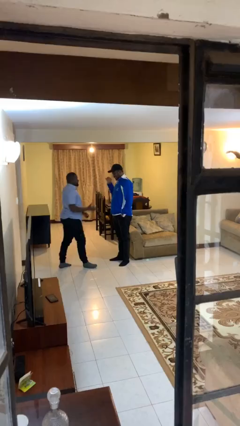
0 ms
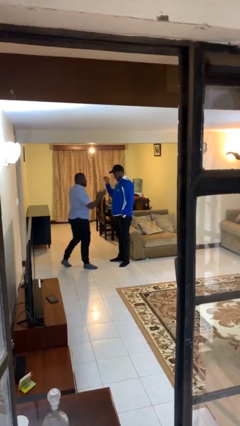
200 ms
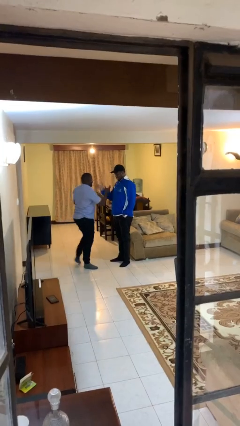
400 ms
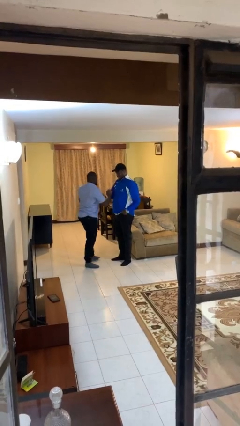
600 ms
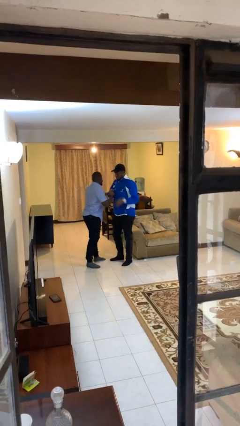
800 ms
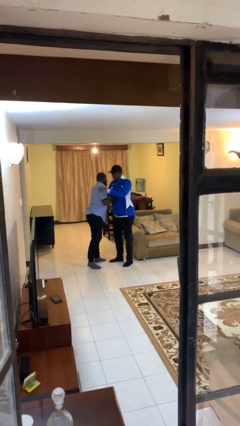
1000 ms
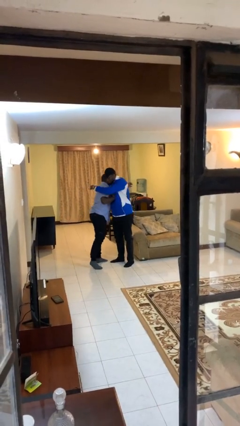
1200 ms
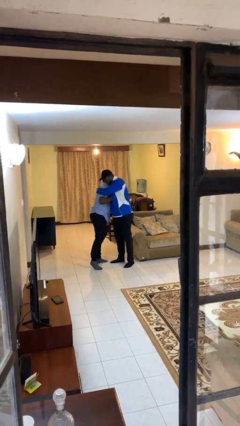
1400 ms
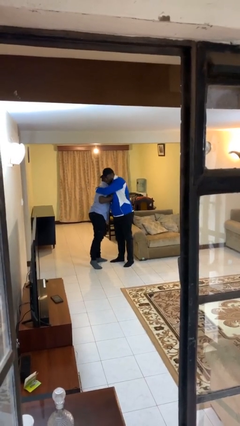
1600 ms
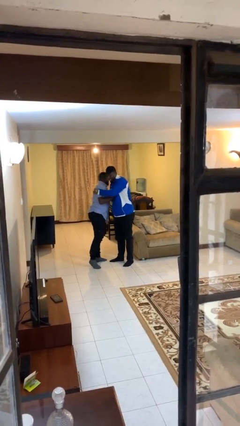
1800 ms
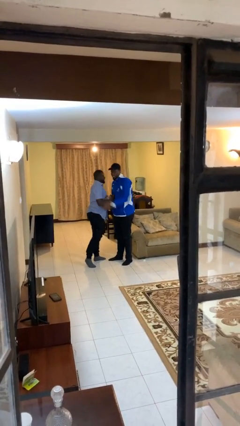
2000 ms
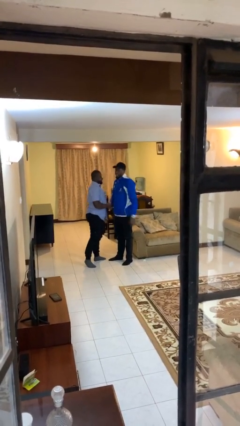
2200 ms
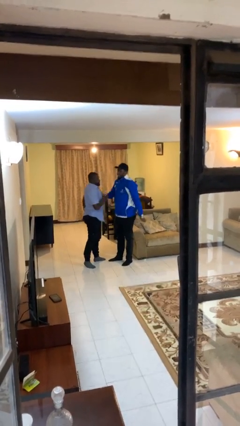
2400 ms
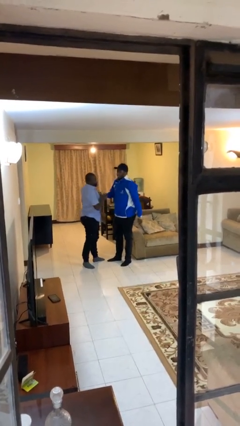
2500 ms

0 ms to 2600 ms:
person embraces person

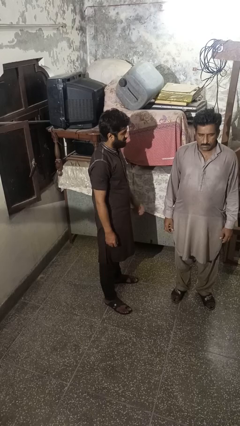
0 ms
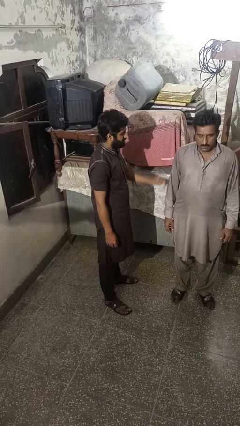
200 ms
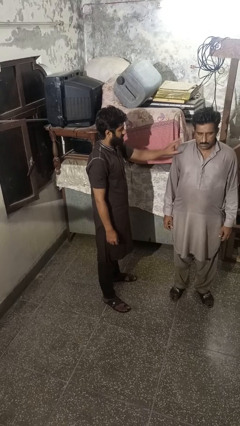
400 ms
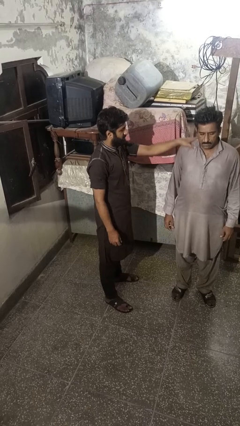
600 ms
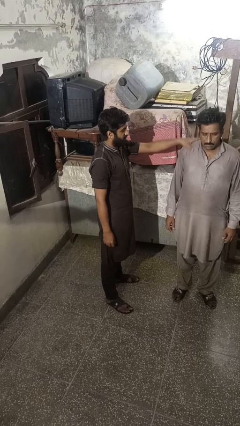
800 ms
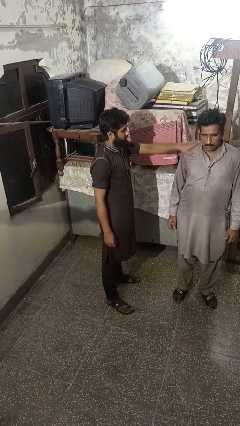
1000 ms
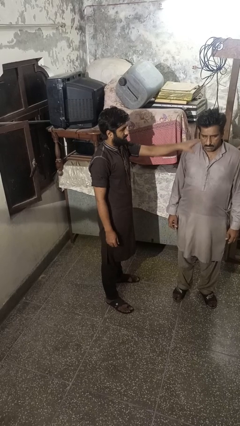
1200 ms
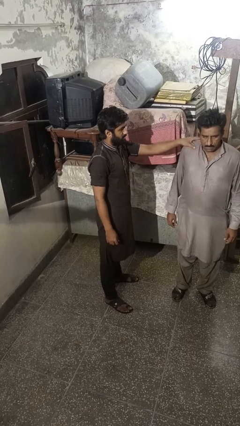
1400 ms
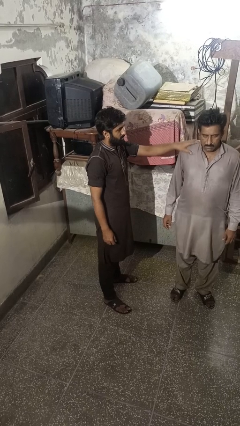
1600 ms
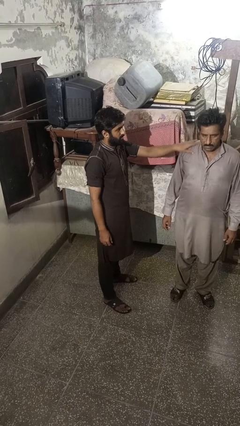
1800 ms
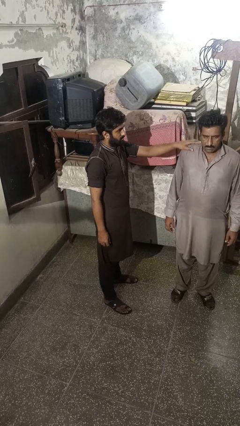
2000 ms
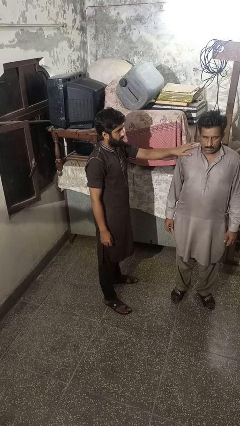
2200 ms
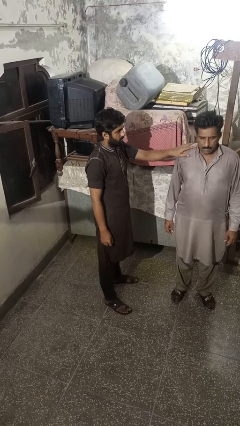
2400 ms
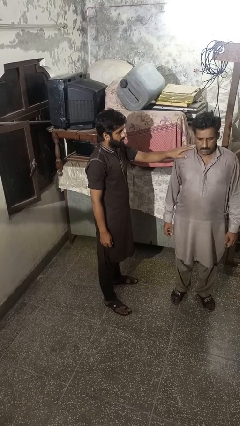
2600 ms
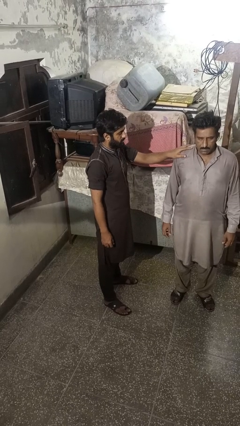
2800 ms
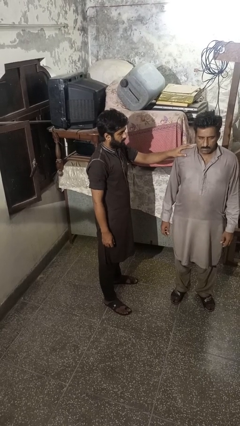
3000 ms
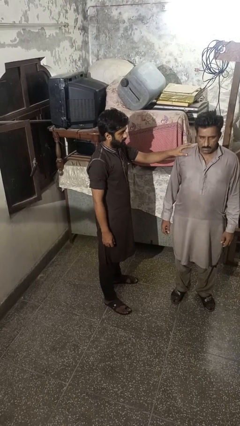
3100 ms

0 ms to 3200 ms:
person grabs person by shoulder

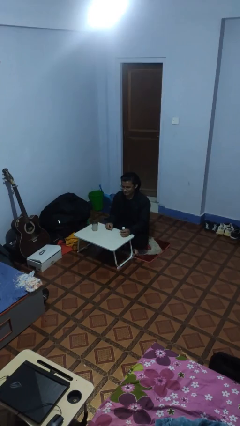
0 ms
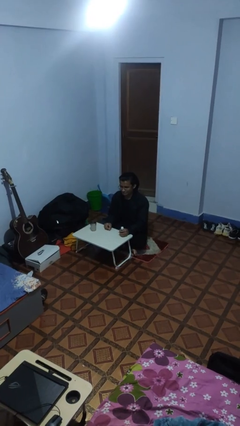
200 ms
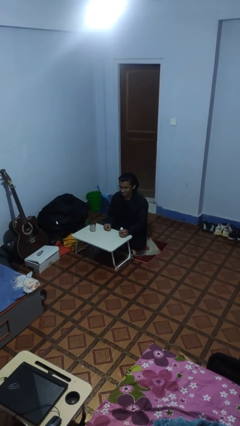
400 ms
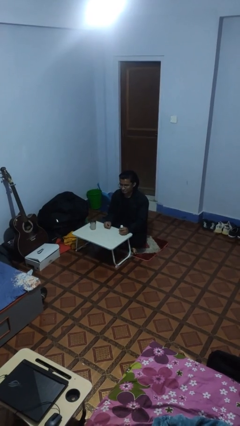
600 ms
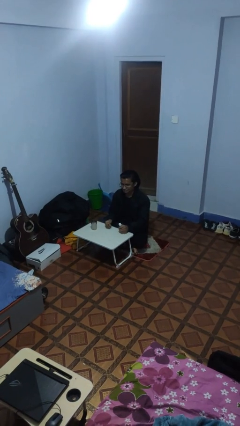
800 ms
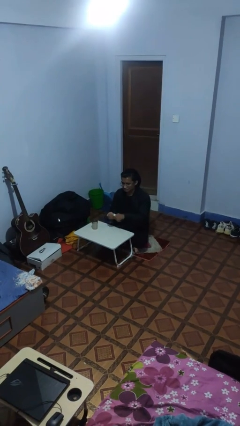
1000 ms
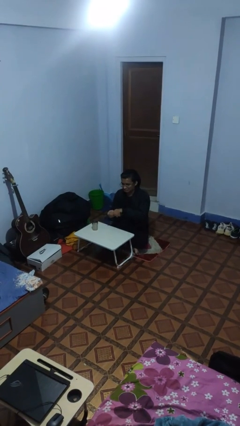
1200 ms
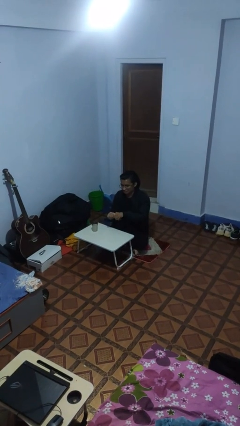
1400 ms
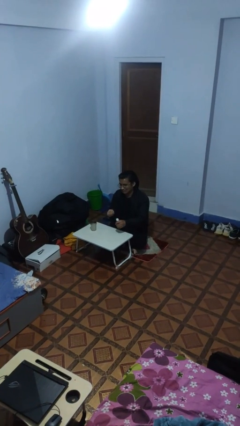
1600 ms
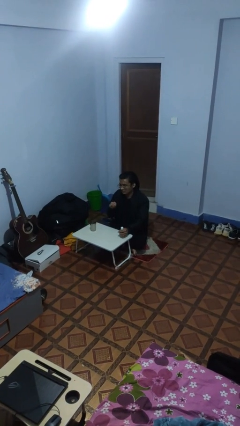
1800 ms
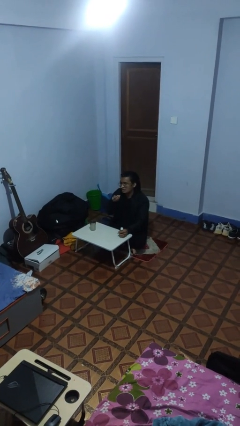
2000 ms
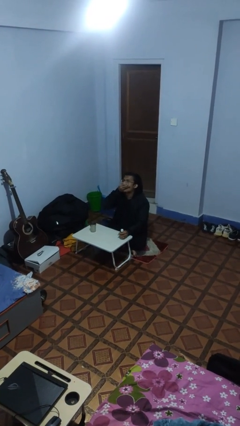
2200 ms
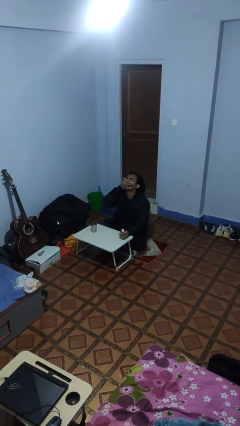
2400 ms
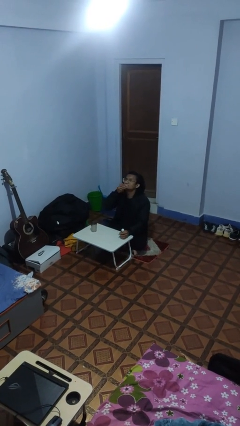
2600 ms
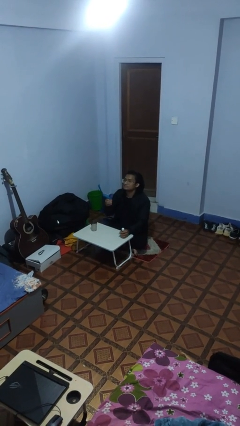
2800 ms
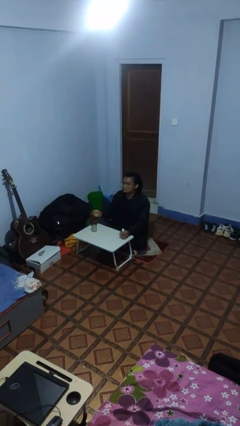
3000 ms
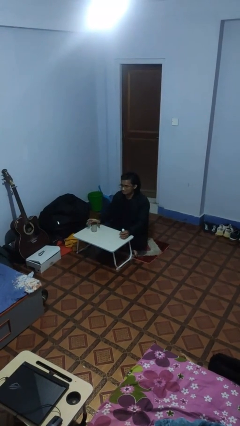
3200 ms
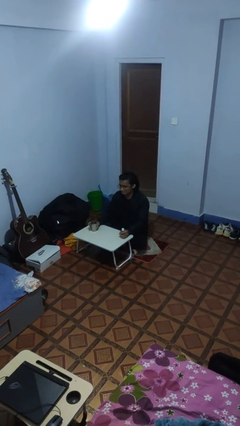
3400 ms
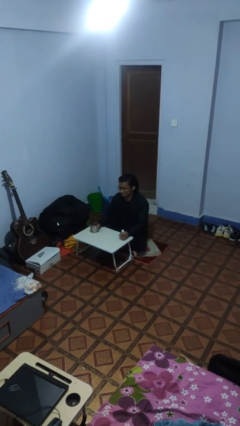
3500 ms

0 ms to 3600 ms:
person takes medicine pills

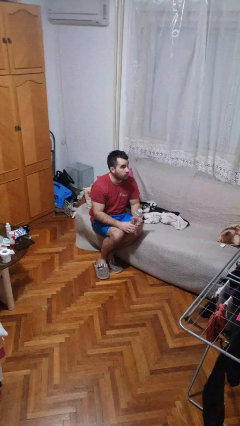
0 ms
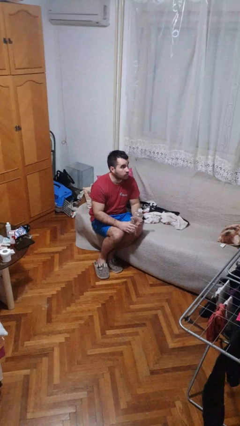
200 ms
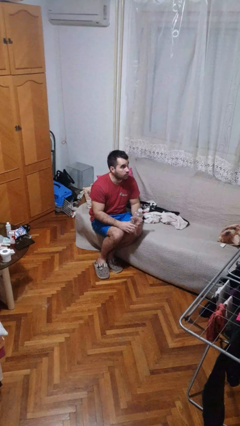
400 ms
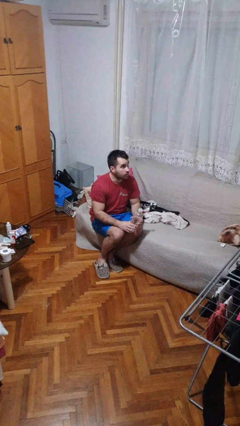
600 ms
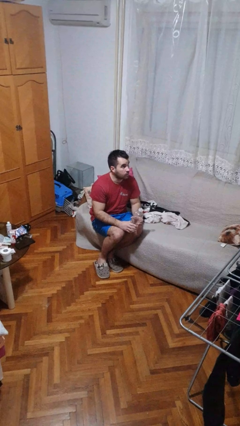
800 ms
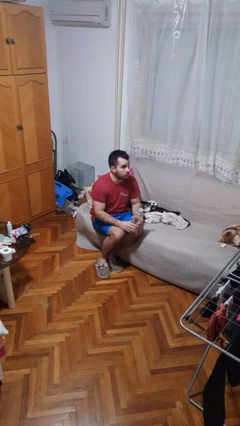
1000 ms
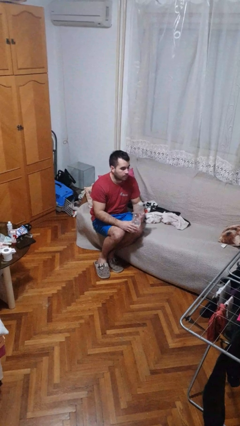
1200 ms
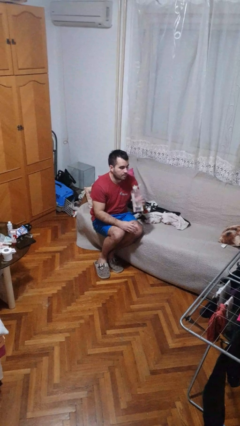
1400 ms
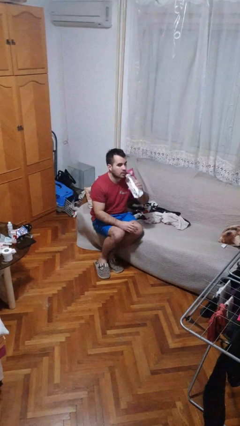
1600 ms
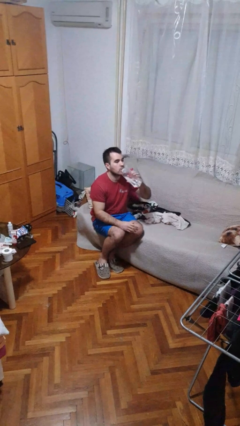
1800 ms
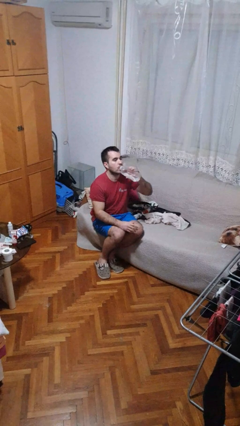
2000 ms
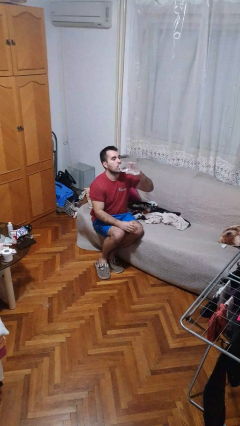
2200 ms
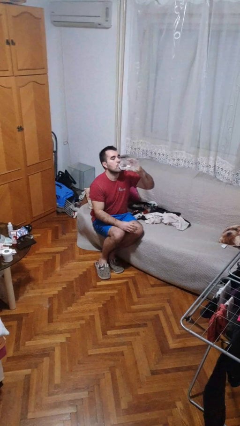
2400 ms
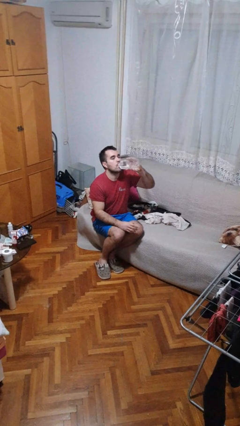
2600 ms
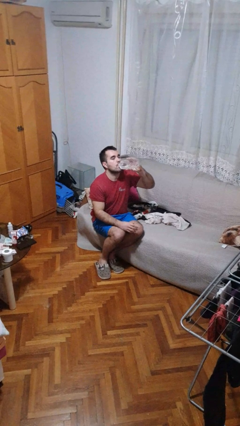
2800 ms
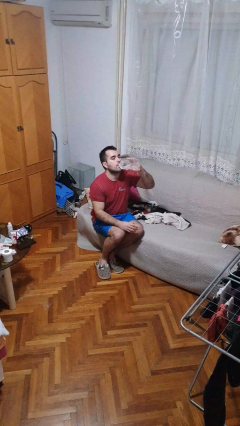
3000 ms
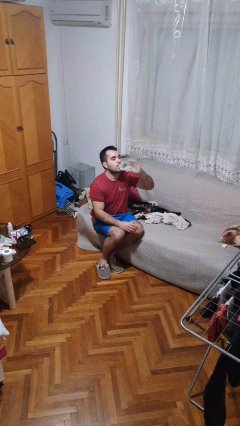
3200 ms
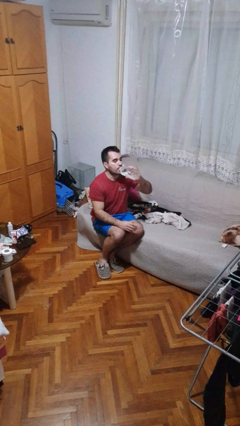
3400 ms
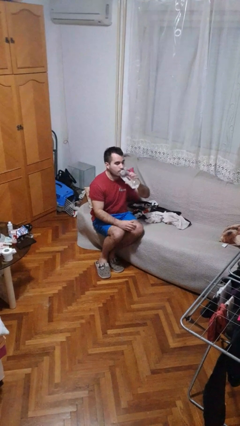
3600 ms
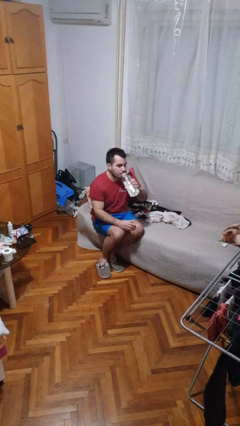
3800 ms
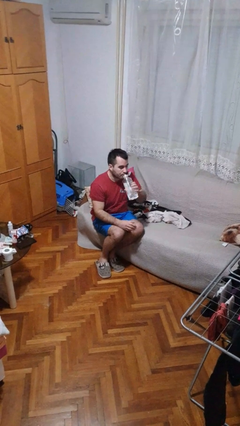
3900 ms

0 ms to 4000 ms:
person drinks from bottle

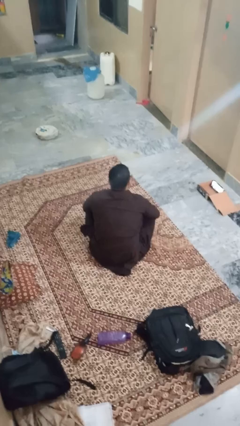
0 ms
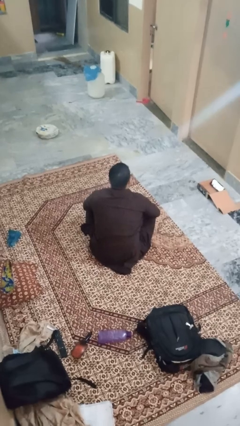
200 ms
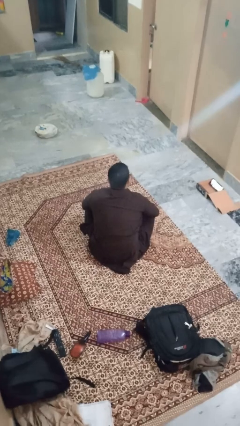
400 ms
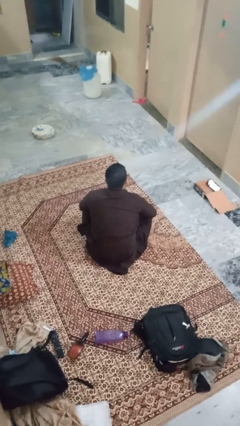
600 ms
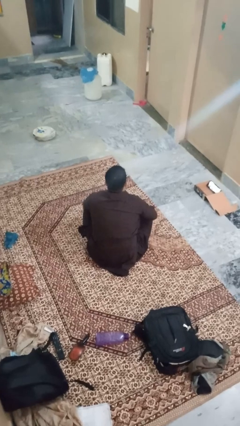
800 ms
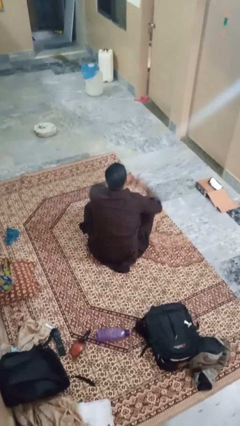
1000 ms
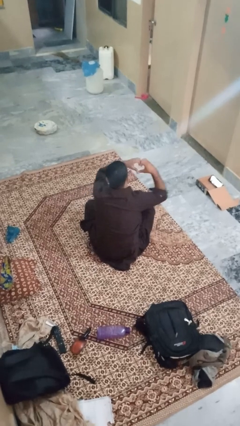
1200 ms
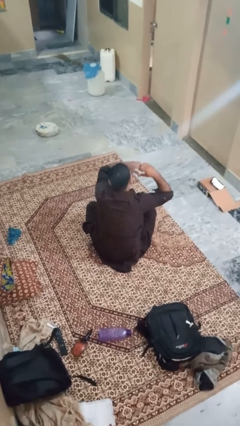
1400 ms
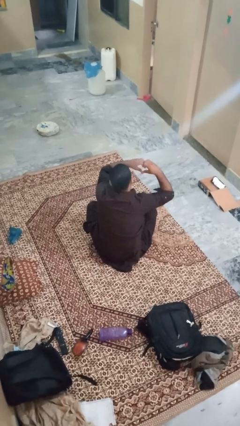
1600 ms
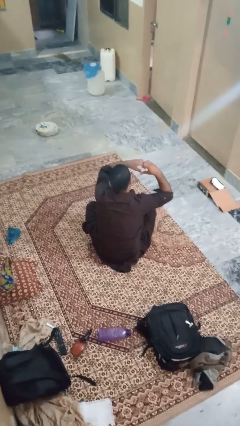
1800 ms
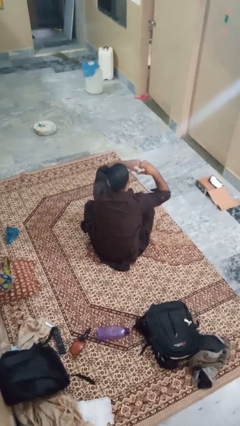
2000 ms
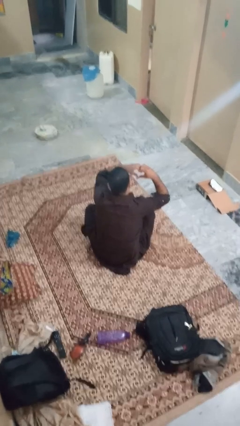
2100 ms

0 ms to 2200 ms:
person gestures heart

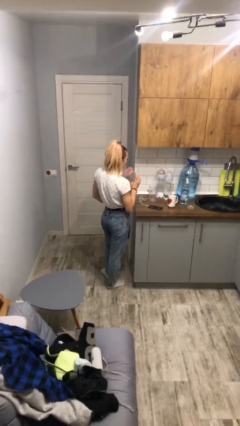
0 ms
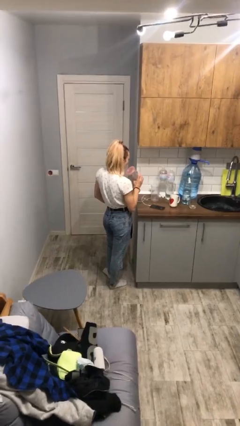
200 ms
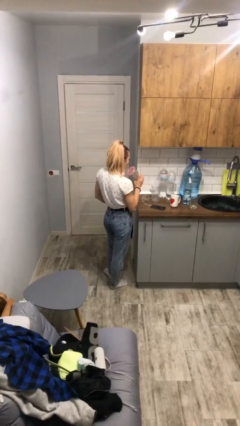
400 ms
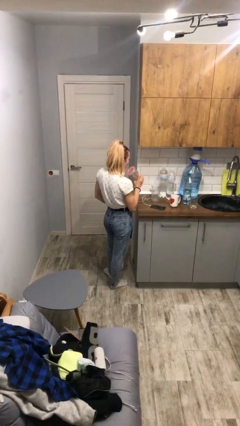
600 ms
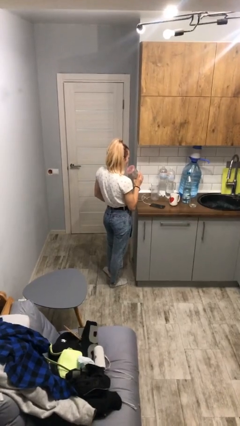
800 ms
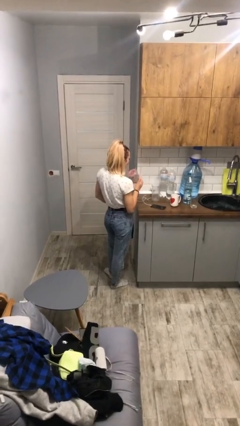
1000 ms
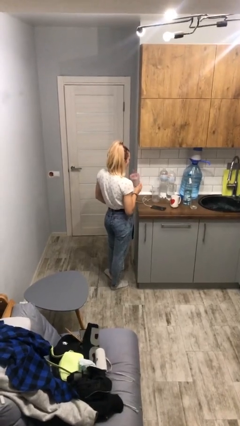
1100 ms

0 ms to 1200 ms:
person drinks from straw

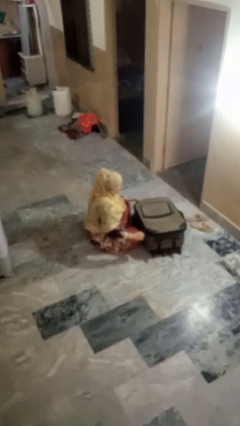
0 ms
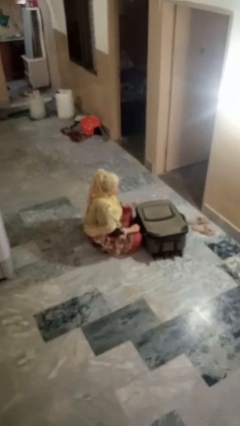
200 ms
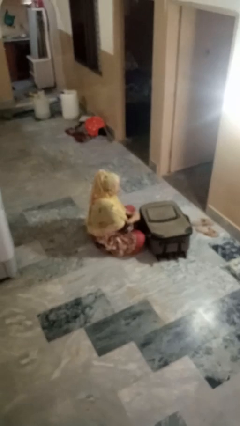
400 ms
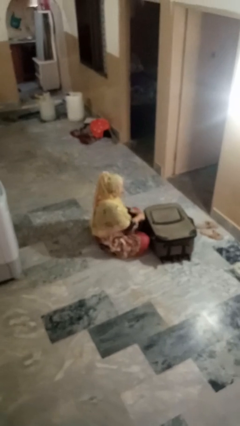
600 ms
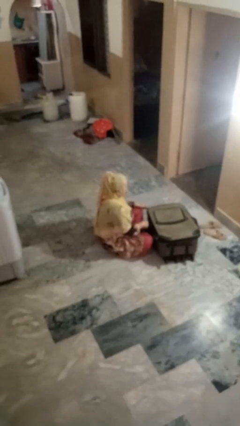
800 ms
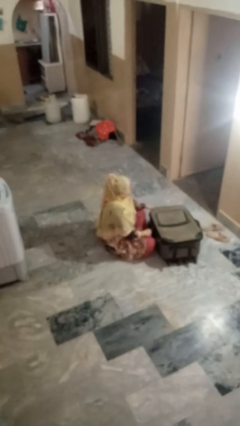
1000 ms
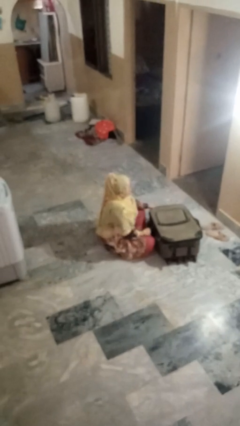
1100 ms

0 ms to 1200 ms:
person closes suitcase
